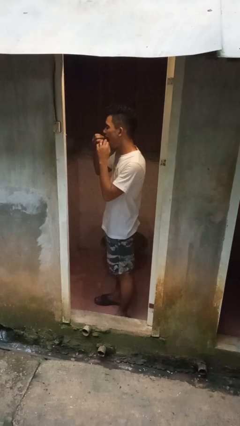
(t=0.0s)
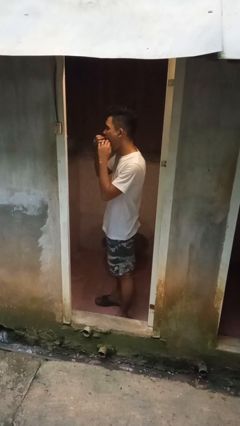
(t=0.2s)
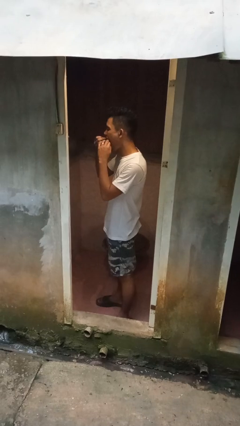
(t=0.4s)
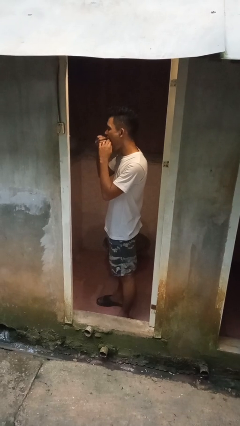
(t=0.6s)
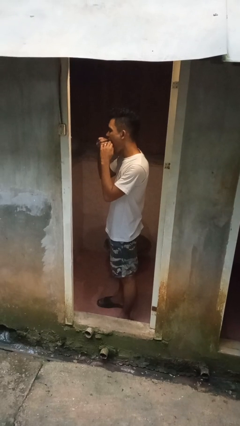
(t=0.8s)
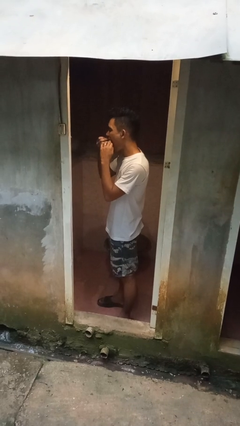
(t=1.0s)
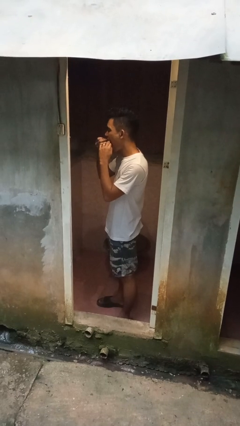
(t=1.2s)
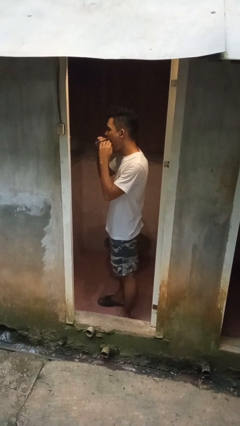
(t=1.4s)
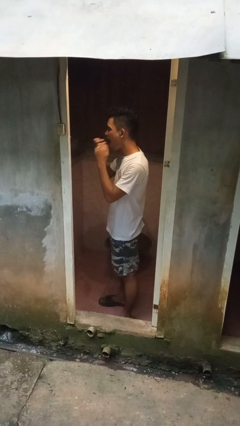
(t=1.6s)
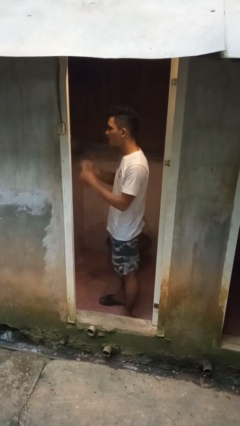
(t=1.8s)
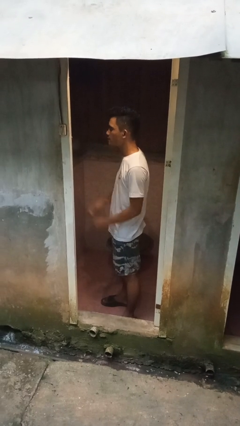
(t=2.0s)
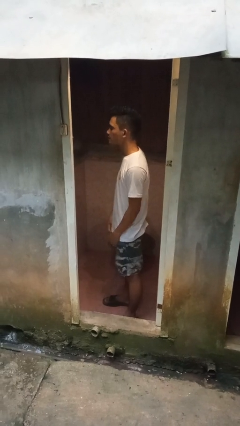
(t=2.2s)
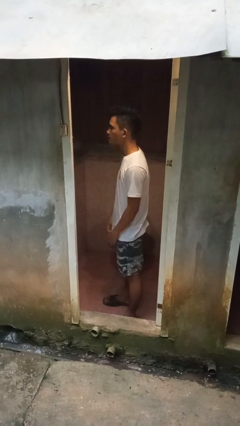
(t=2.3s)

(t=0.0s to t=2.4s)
person flosses

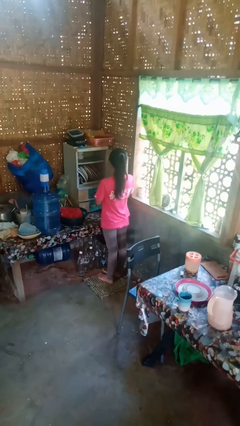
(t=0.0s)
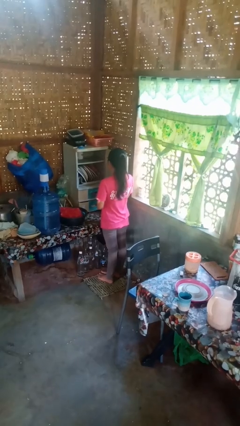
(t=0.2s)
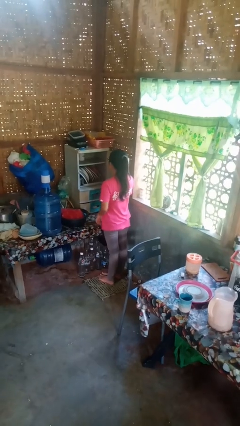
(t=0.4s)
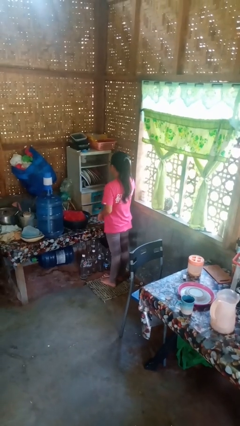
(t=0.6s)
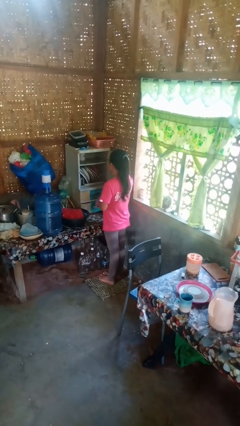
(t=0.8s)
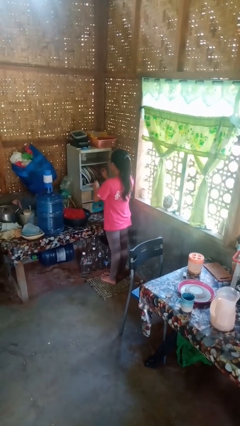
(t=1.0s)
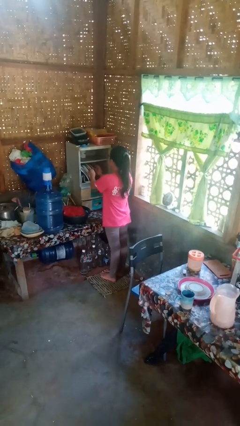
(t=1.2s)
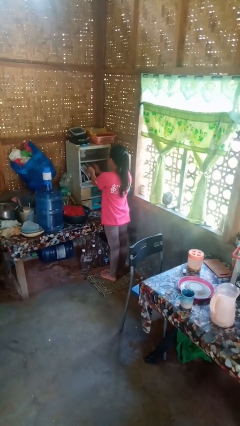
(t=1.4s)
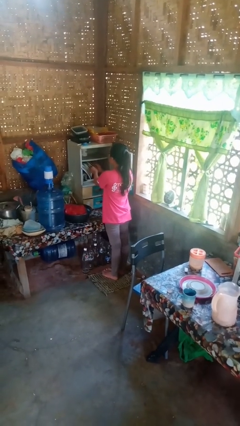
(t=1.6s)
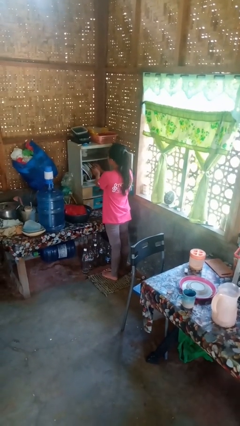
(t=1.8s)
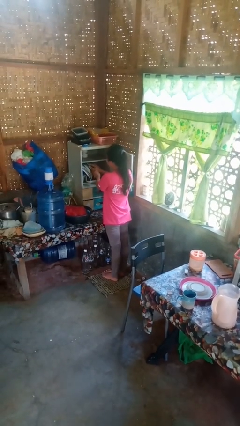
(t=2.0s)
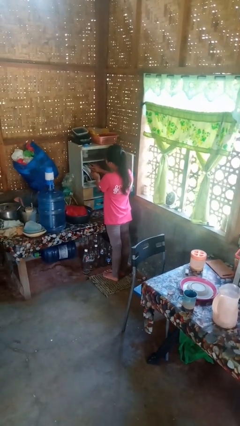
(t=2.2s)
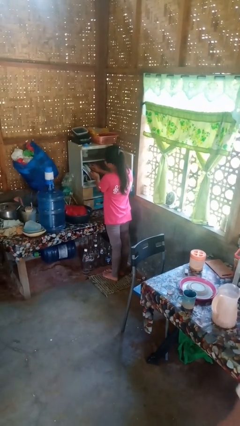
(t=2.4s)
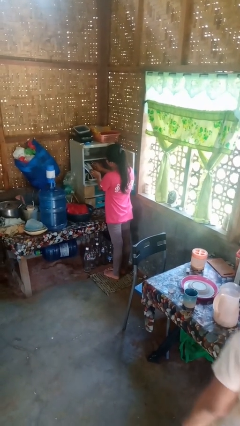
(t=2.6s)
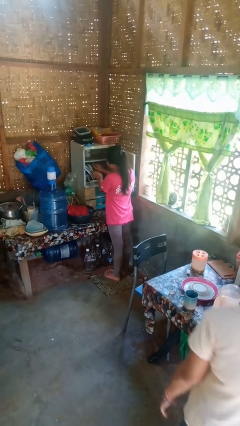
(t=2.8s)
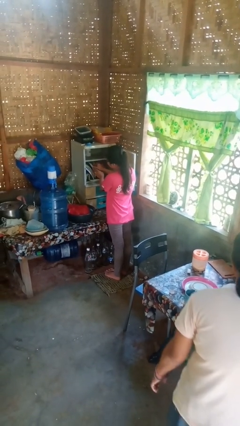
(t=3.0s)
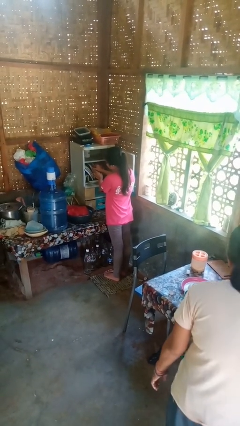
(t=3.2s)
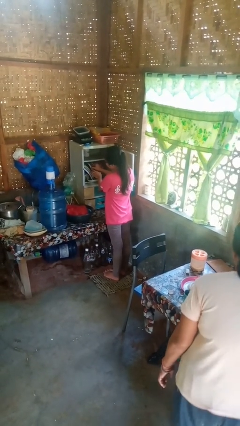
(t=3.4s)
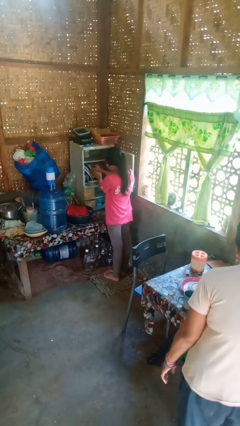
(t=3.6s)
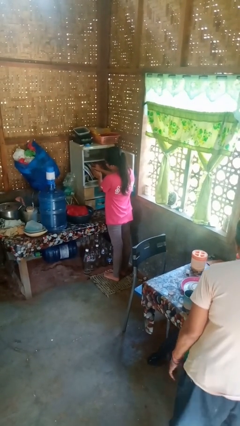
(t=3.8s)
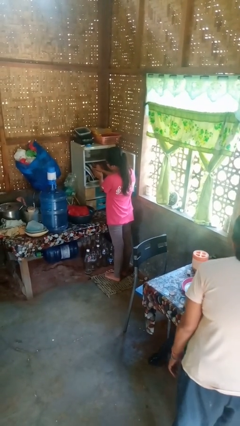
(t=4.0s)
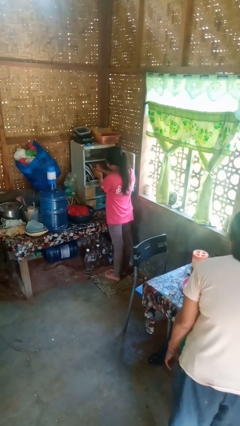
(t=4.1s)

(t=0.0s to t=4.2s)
person searches in cabinet

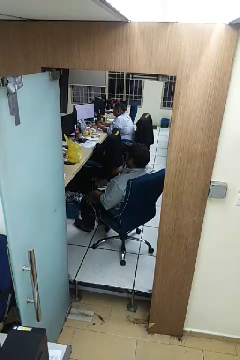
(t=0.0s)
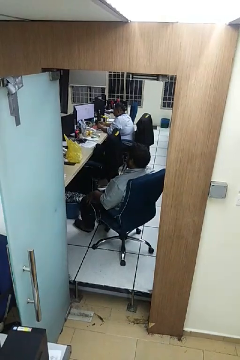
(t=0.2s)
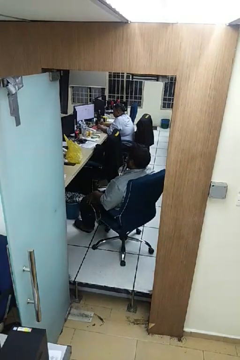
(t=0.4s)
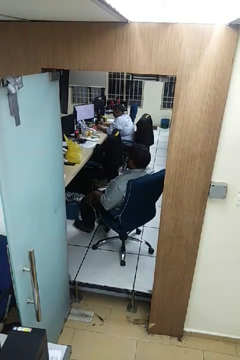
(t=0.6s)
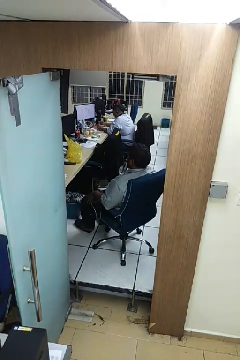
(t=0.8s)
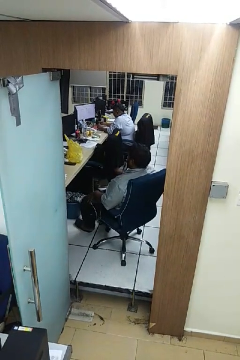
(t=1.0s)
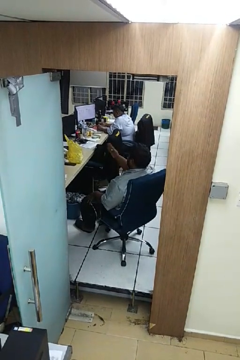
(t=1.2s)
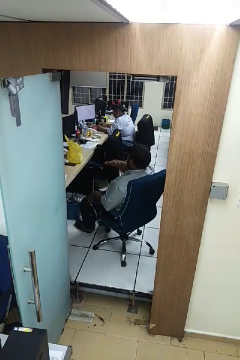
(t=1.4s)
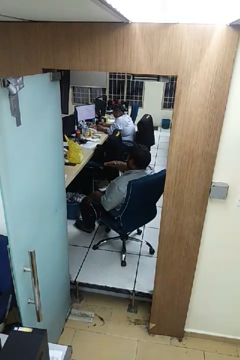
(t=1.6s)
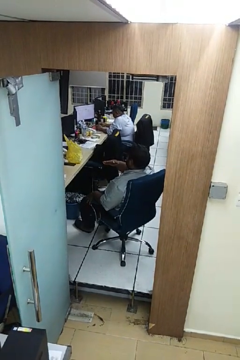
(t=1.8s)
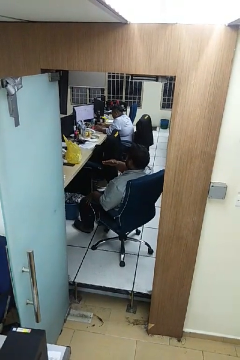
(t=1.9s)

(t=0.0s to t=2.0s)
person gestures swipe left

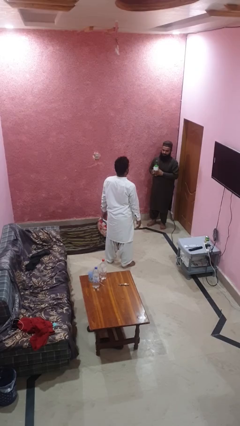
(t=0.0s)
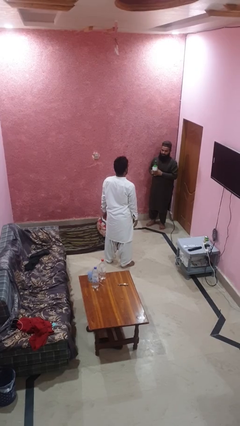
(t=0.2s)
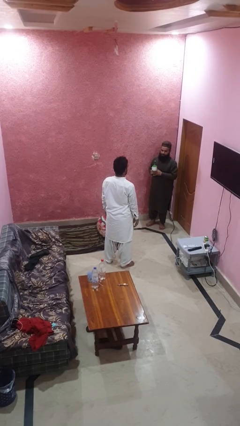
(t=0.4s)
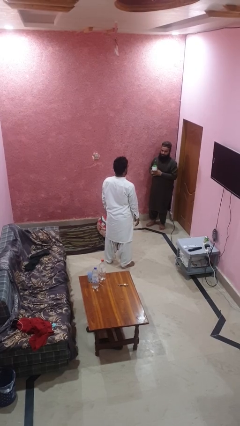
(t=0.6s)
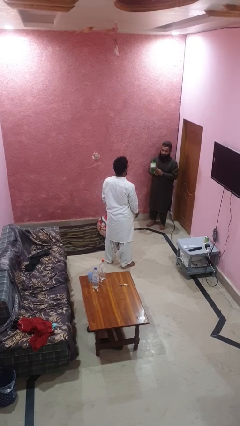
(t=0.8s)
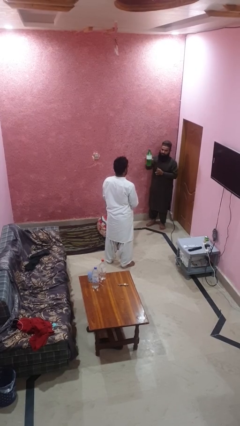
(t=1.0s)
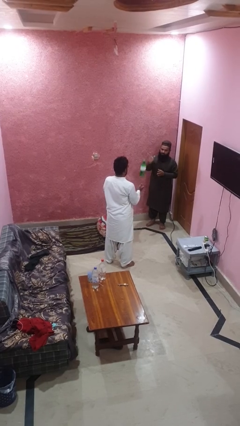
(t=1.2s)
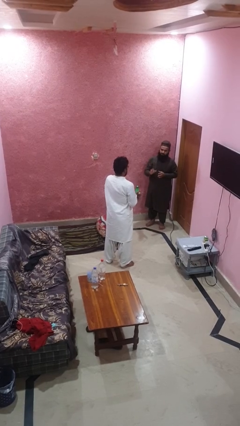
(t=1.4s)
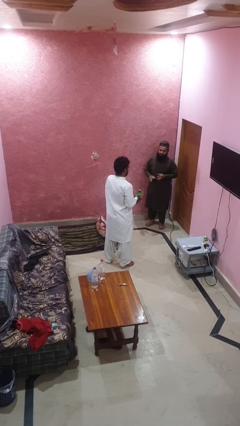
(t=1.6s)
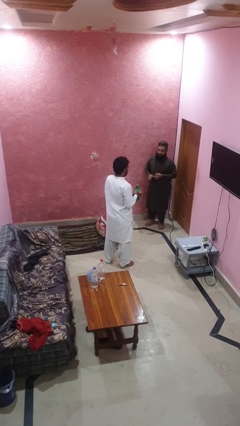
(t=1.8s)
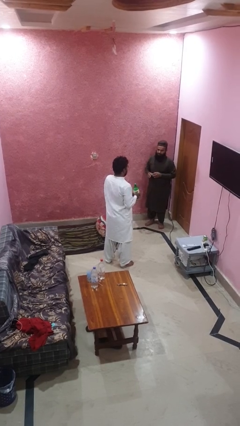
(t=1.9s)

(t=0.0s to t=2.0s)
person catches object from person

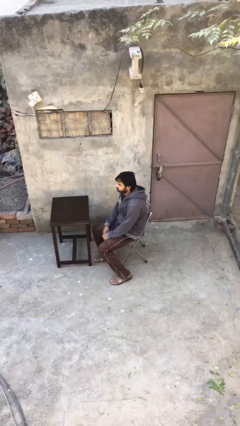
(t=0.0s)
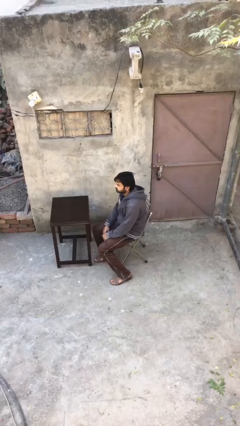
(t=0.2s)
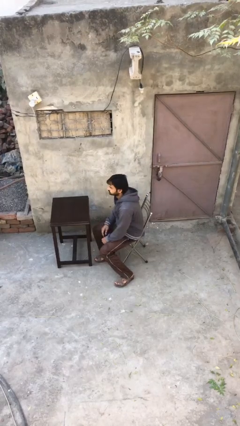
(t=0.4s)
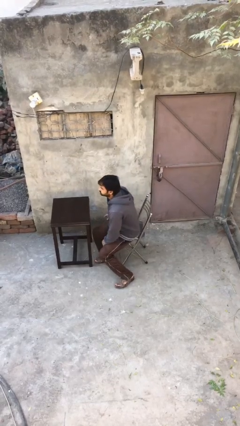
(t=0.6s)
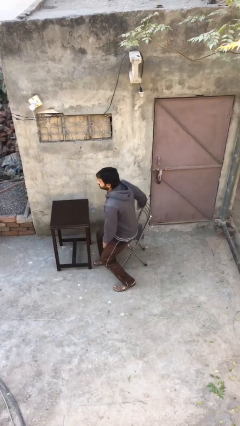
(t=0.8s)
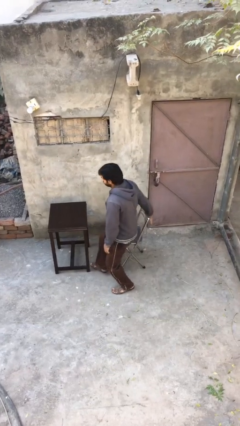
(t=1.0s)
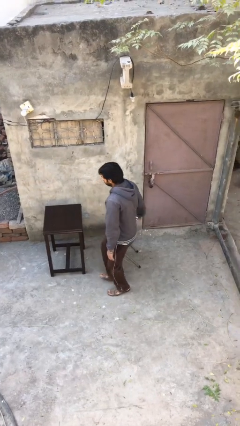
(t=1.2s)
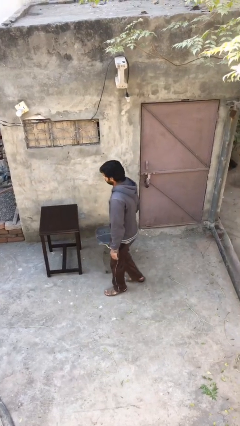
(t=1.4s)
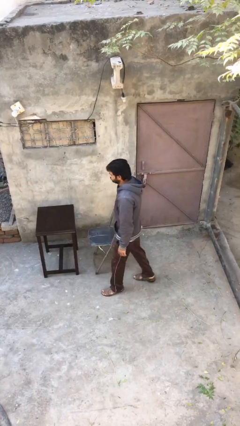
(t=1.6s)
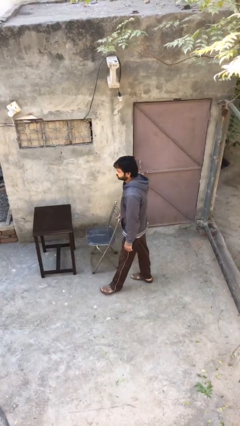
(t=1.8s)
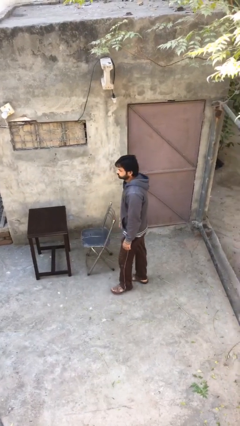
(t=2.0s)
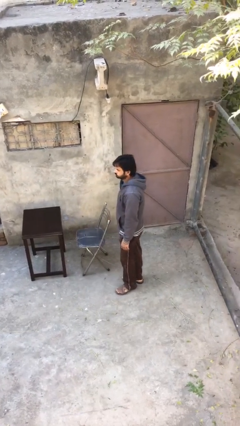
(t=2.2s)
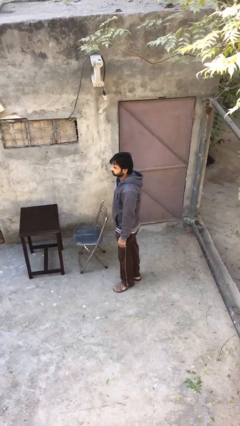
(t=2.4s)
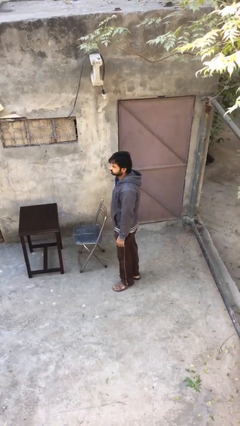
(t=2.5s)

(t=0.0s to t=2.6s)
person stands up

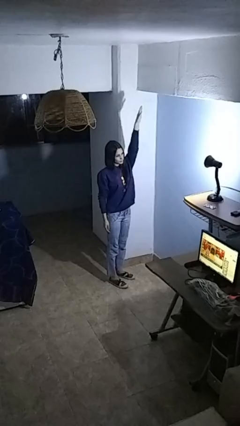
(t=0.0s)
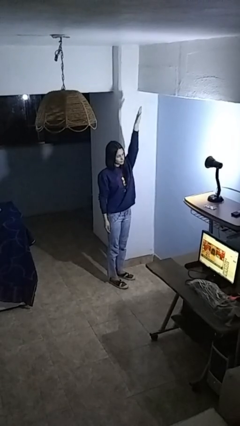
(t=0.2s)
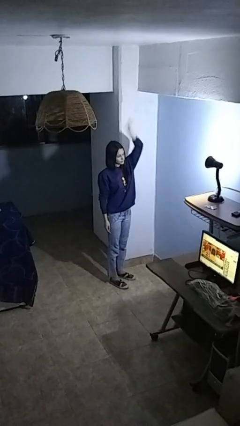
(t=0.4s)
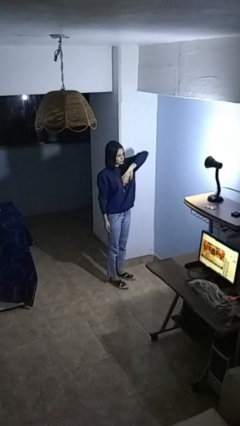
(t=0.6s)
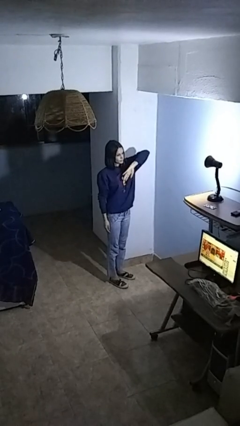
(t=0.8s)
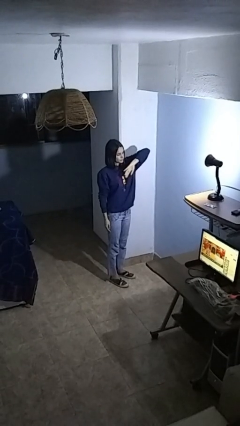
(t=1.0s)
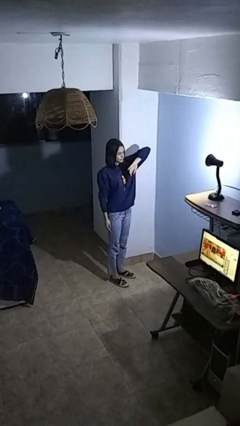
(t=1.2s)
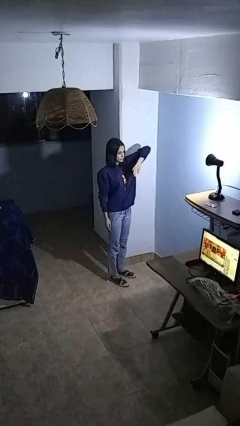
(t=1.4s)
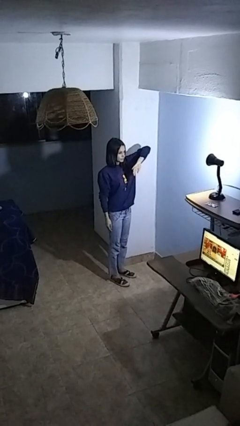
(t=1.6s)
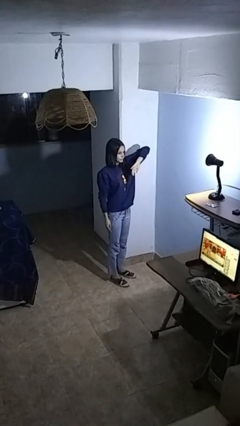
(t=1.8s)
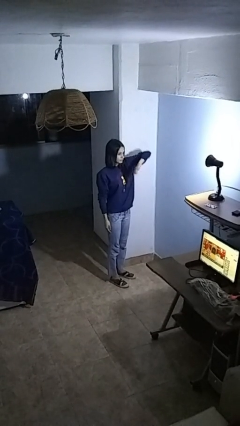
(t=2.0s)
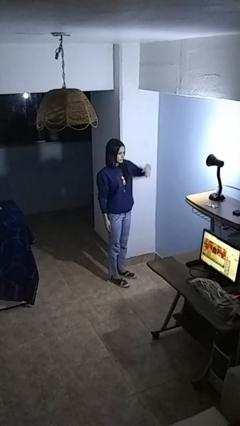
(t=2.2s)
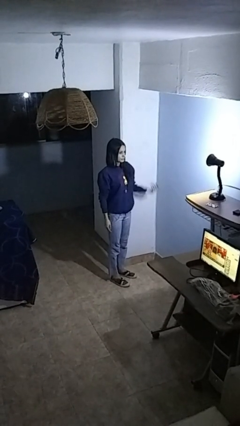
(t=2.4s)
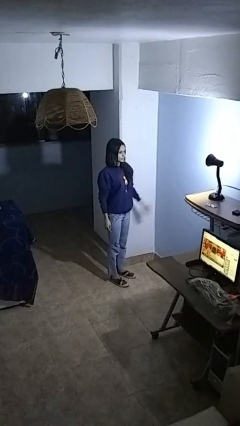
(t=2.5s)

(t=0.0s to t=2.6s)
person gestures swipe down

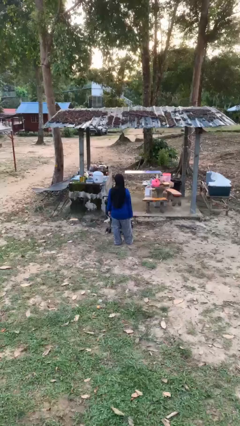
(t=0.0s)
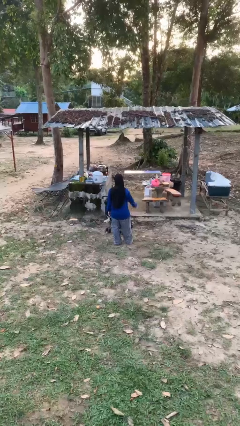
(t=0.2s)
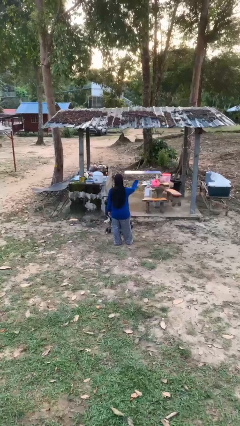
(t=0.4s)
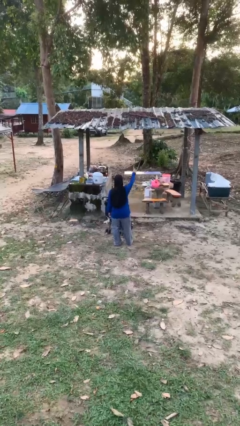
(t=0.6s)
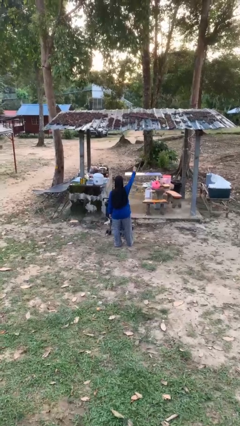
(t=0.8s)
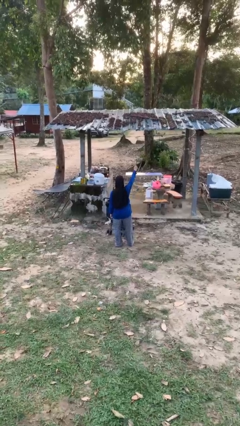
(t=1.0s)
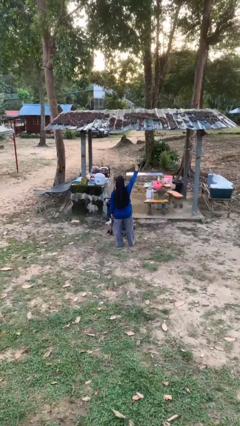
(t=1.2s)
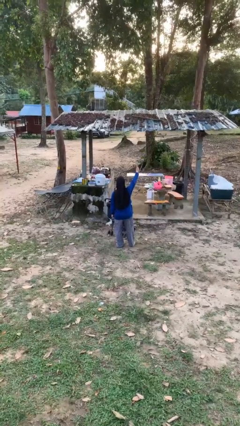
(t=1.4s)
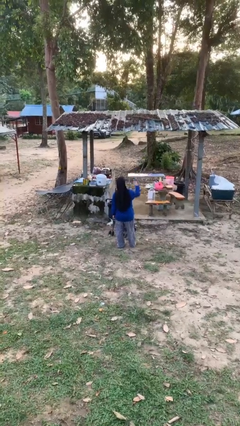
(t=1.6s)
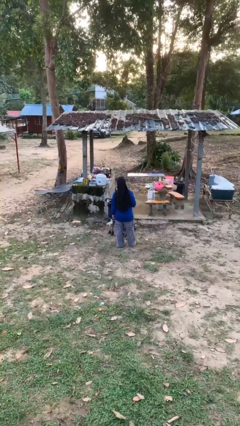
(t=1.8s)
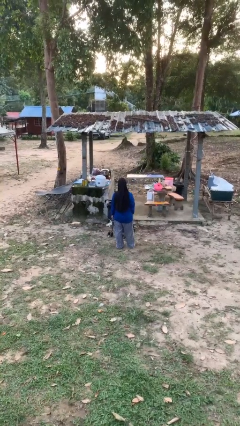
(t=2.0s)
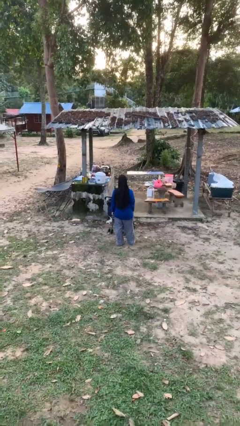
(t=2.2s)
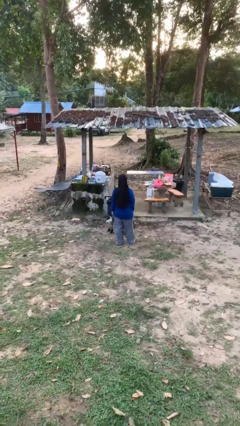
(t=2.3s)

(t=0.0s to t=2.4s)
person gestures number one
